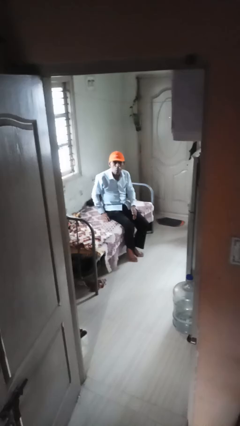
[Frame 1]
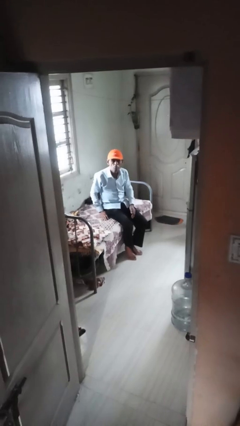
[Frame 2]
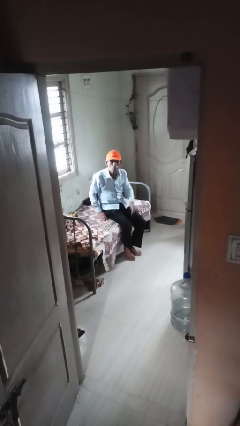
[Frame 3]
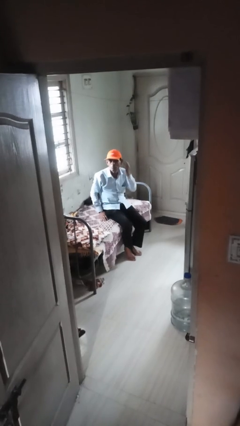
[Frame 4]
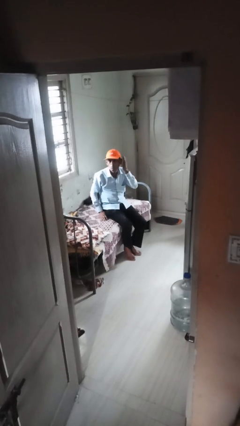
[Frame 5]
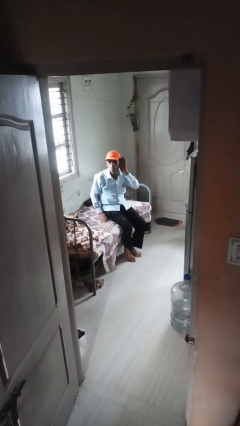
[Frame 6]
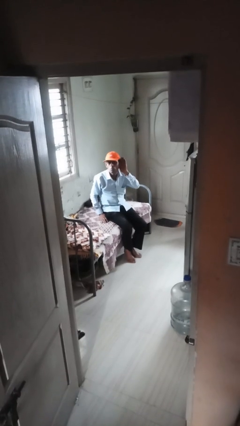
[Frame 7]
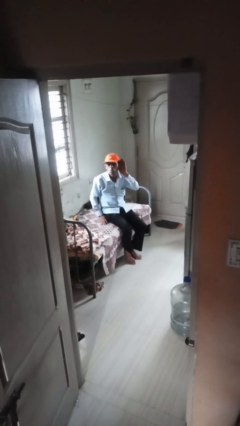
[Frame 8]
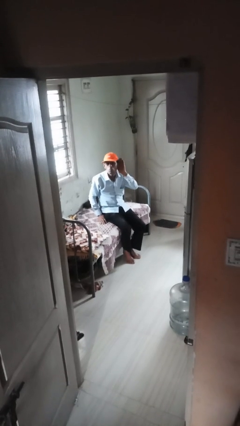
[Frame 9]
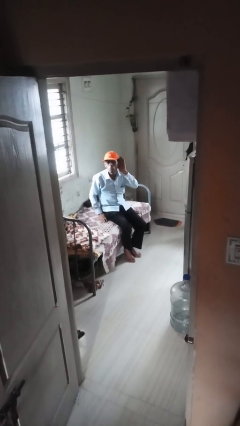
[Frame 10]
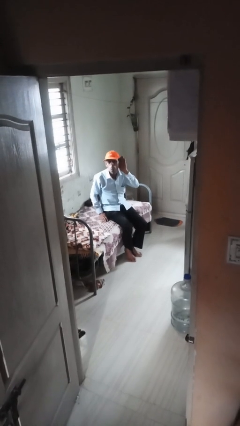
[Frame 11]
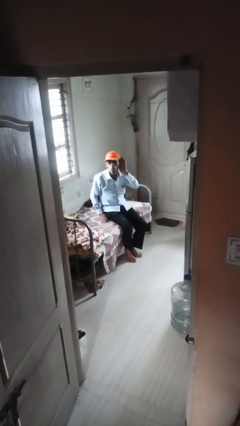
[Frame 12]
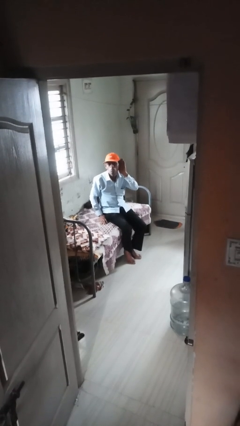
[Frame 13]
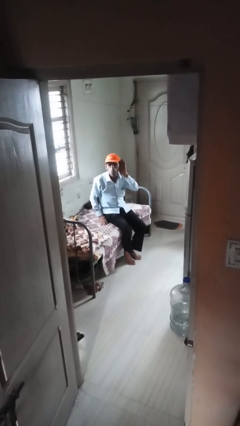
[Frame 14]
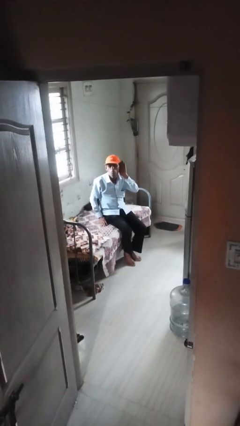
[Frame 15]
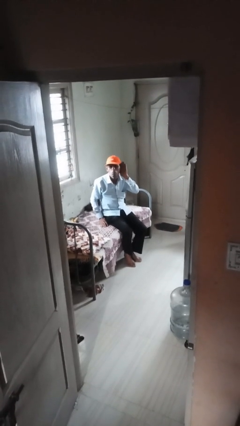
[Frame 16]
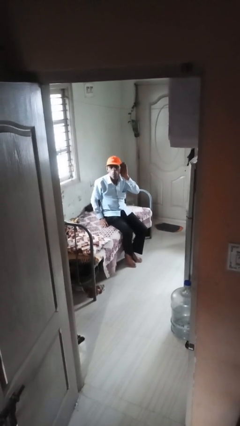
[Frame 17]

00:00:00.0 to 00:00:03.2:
person gestures listen closely

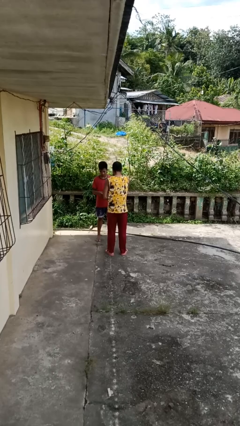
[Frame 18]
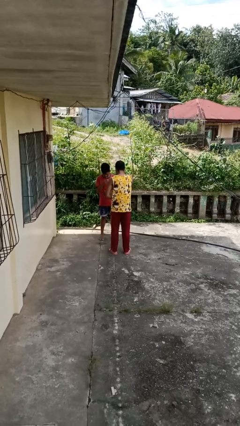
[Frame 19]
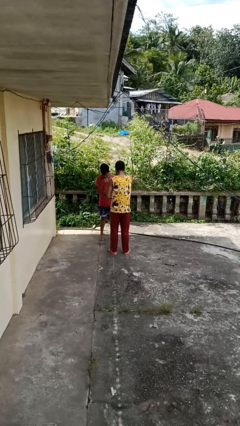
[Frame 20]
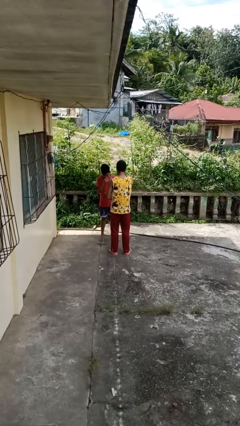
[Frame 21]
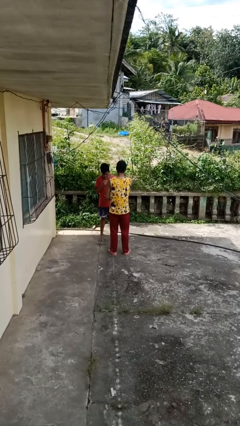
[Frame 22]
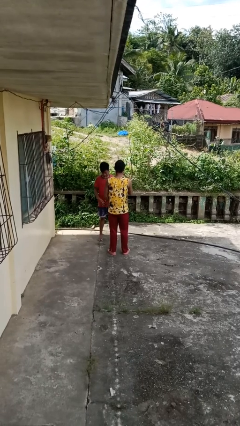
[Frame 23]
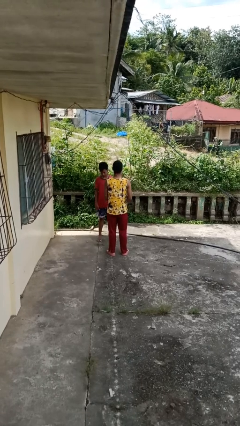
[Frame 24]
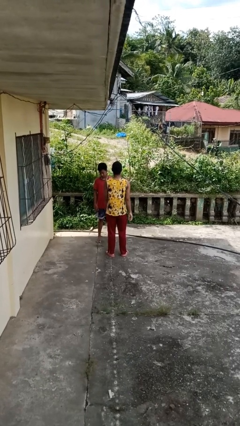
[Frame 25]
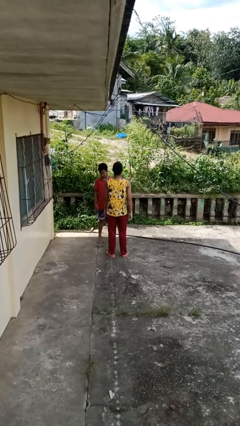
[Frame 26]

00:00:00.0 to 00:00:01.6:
person laughs with person

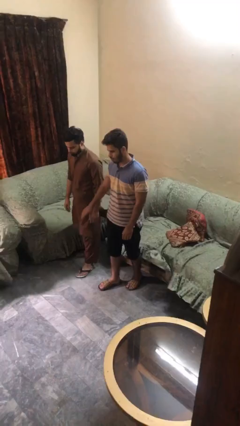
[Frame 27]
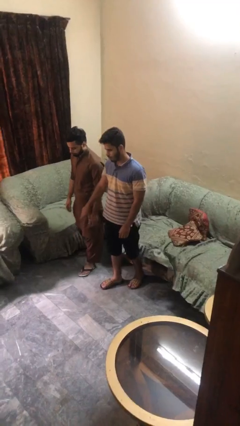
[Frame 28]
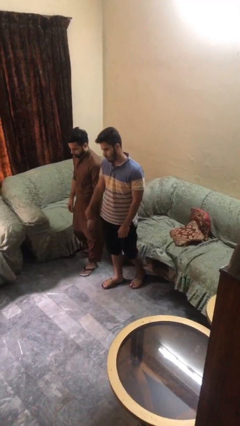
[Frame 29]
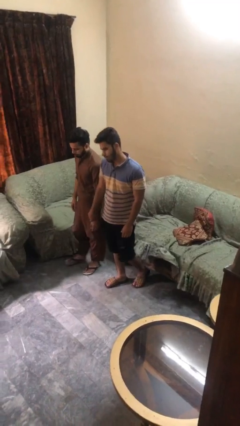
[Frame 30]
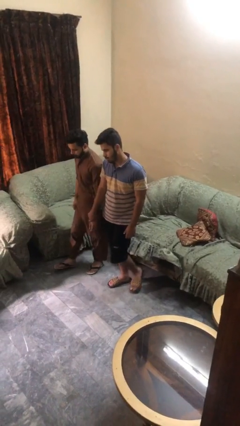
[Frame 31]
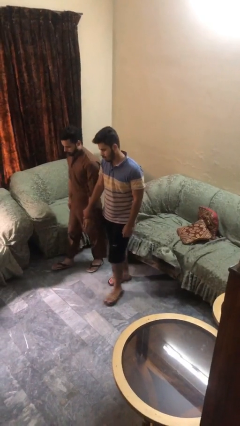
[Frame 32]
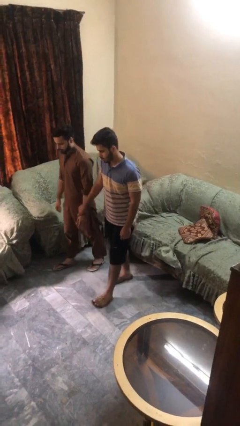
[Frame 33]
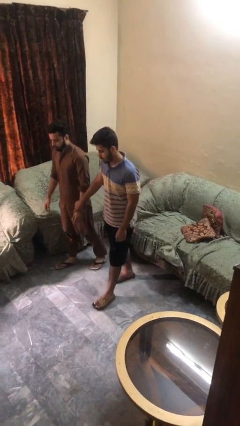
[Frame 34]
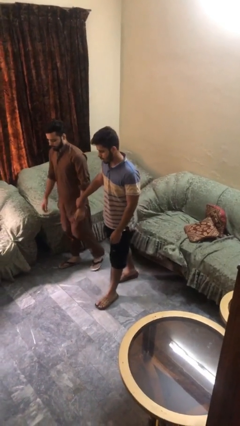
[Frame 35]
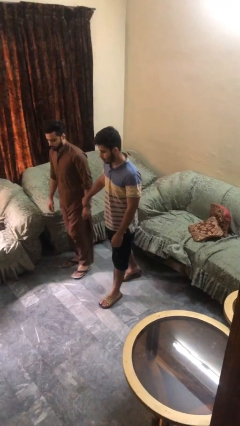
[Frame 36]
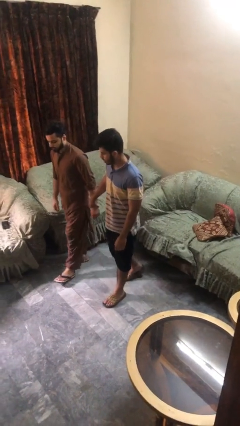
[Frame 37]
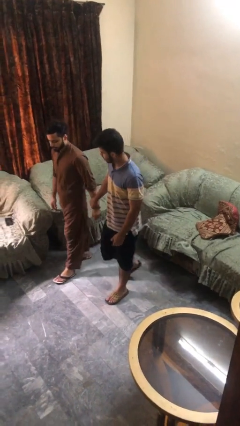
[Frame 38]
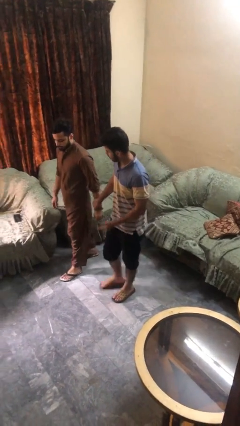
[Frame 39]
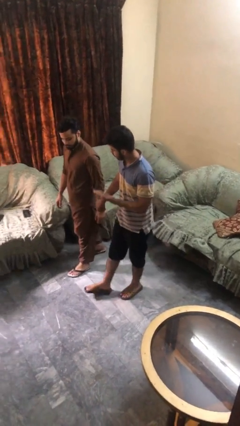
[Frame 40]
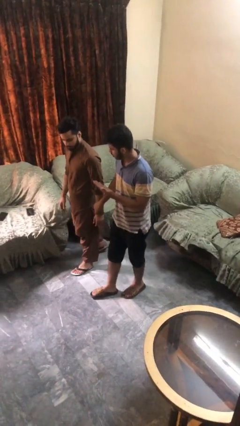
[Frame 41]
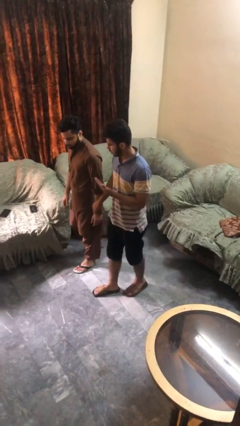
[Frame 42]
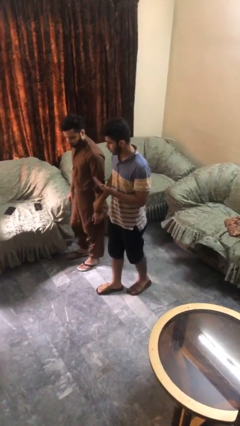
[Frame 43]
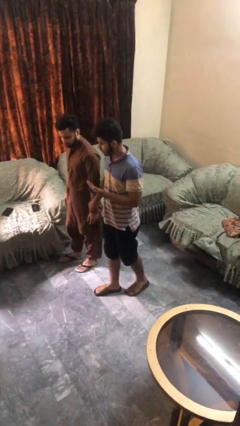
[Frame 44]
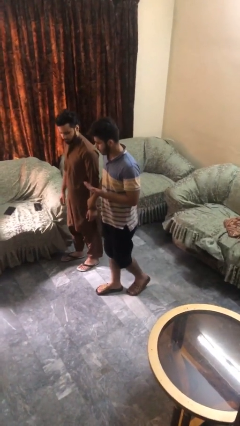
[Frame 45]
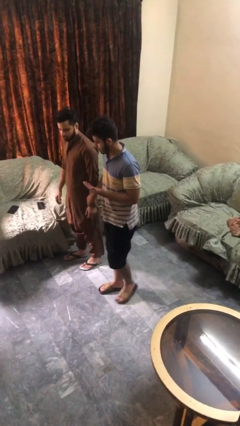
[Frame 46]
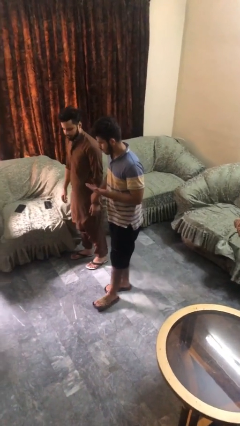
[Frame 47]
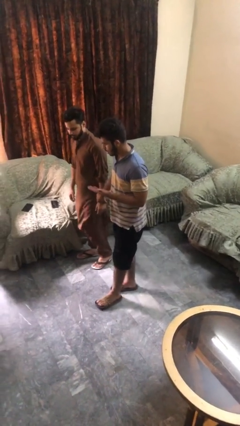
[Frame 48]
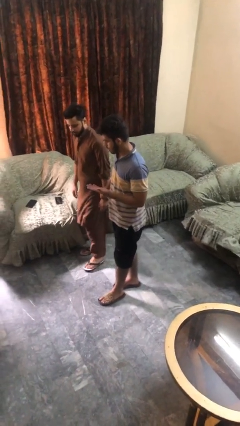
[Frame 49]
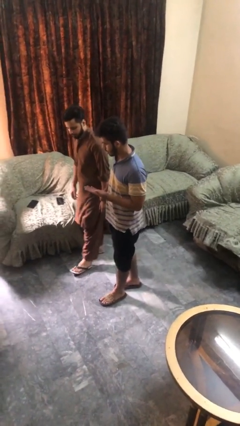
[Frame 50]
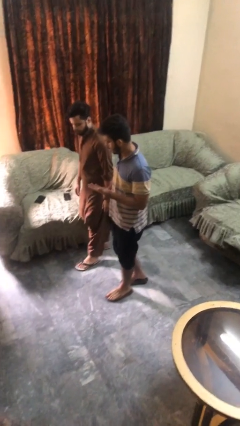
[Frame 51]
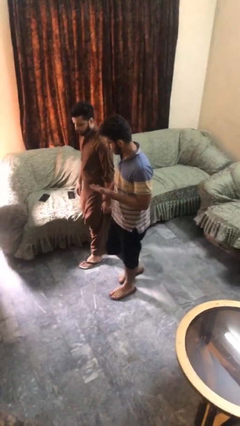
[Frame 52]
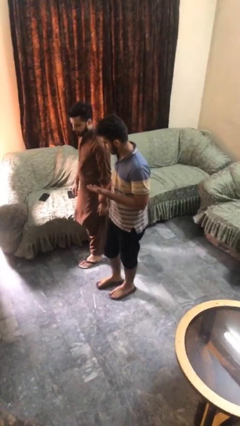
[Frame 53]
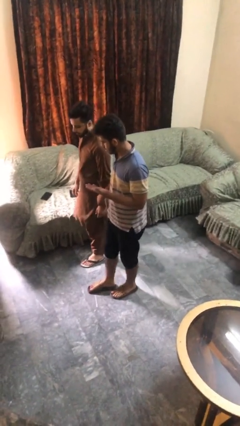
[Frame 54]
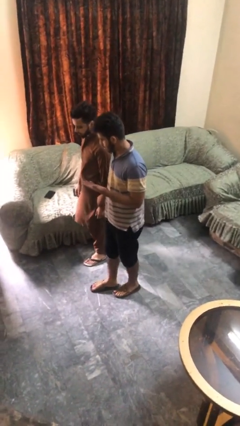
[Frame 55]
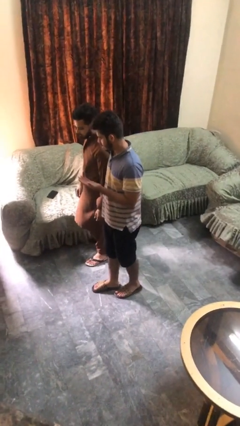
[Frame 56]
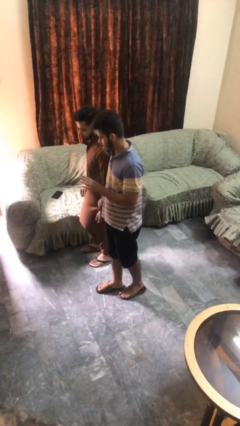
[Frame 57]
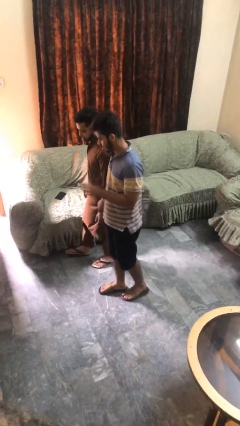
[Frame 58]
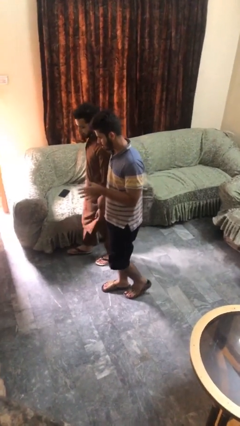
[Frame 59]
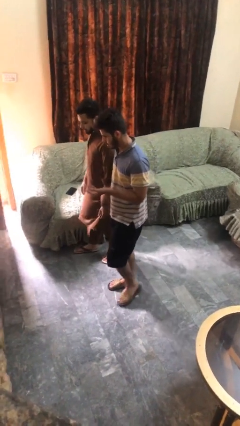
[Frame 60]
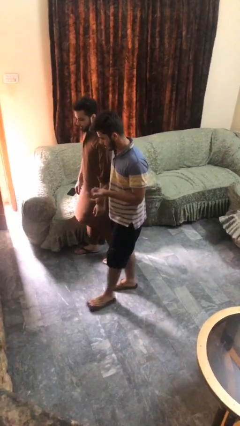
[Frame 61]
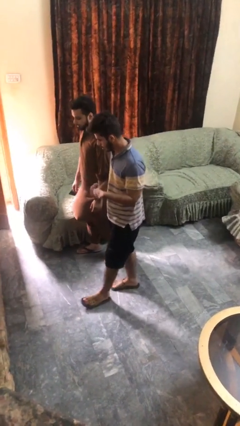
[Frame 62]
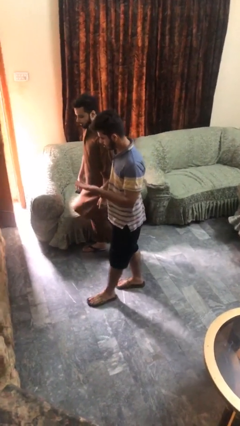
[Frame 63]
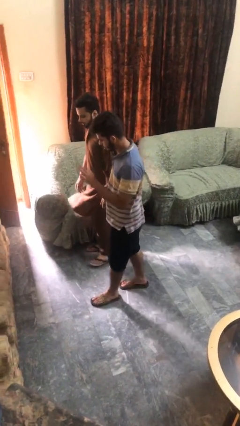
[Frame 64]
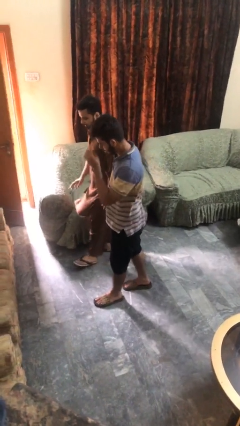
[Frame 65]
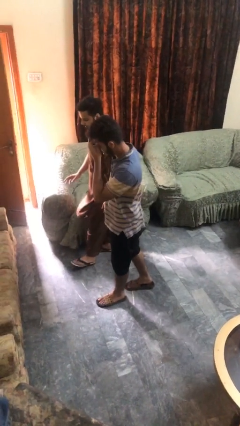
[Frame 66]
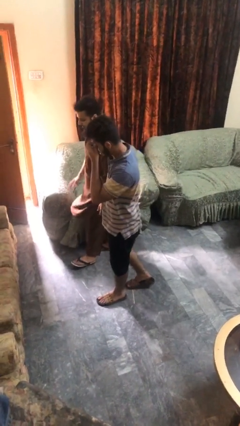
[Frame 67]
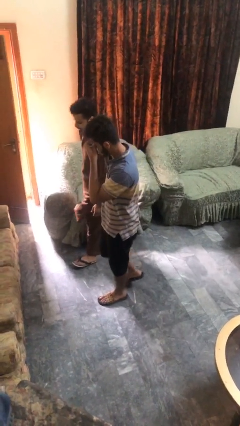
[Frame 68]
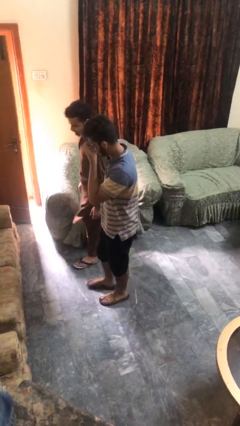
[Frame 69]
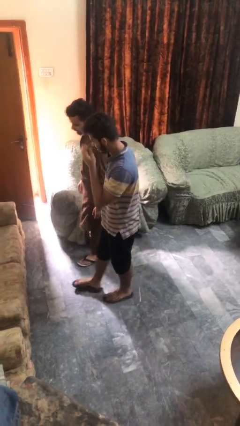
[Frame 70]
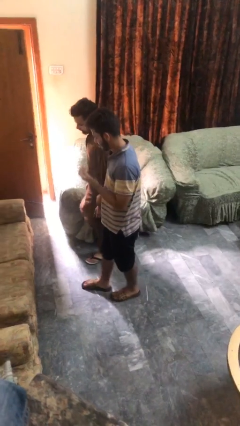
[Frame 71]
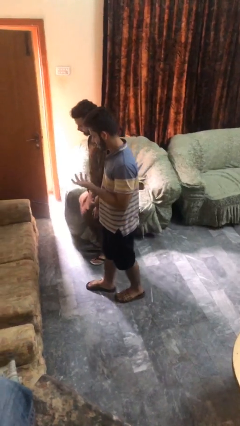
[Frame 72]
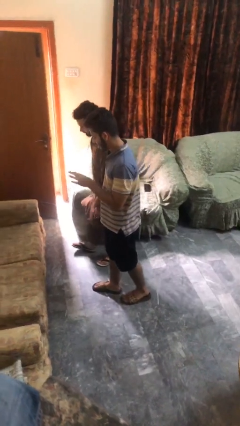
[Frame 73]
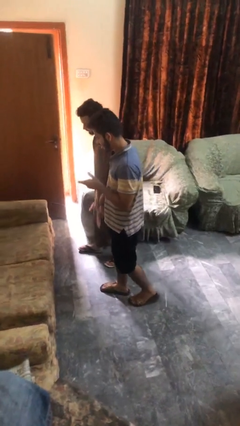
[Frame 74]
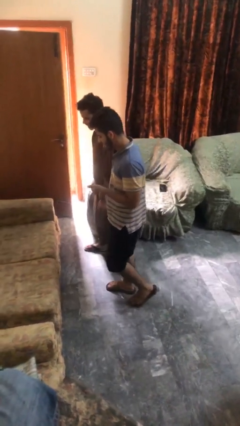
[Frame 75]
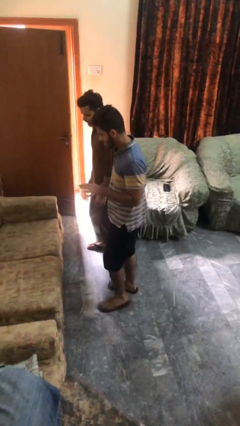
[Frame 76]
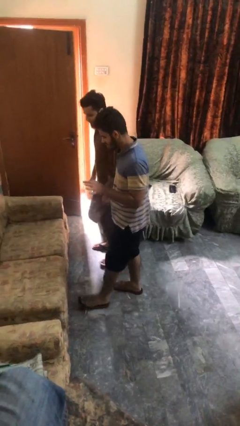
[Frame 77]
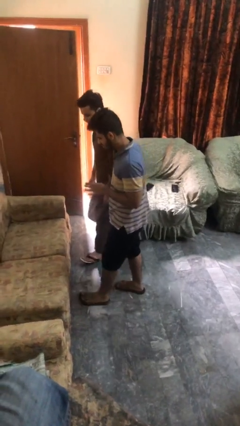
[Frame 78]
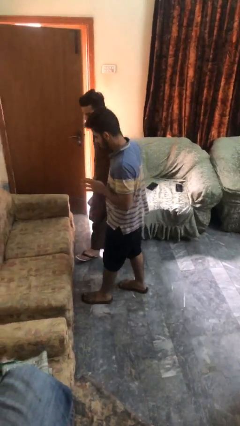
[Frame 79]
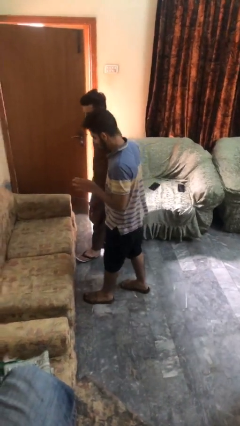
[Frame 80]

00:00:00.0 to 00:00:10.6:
person holds hand

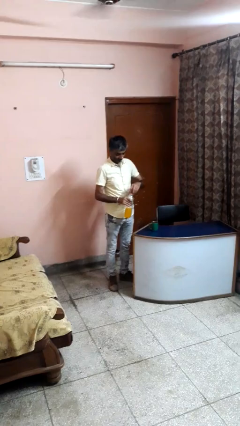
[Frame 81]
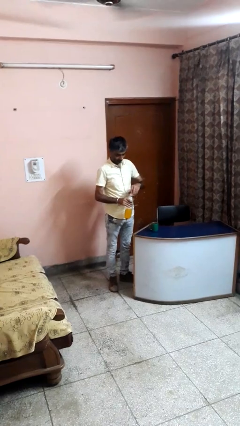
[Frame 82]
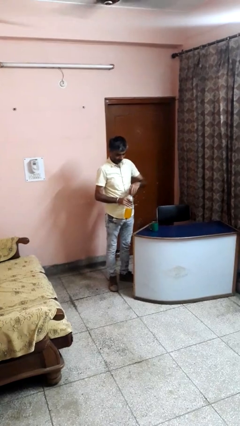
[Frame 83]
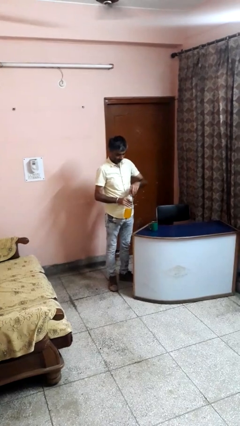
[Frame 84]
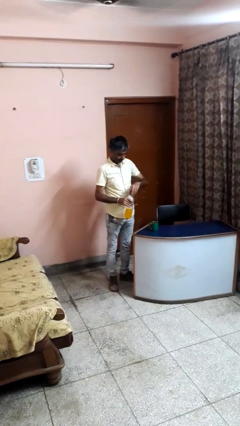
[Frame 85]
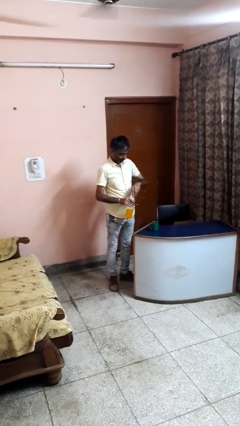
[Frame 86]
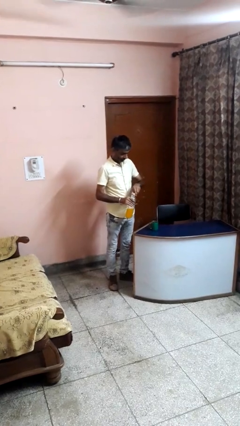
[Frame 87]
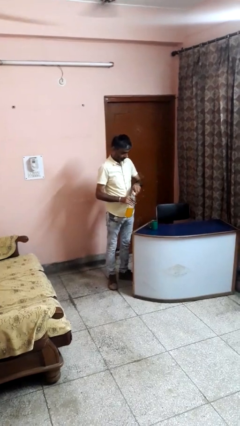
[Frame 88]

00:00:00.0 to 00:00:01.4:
person unscrews lid from bottle

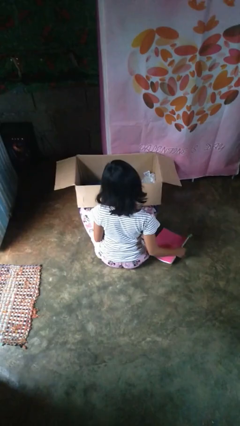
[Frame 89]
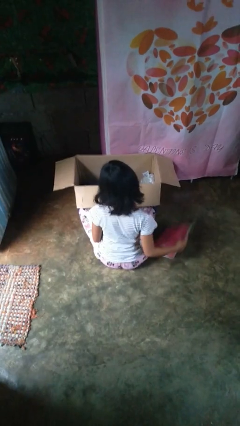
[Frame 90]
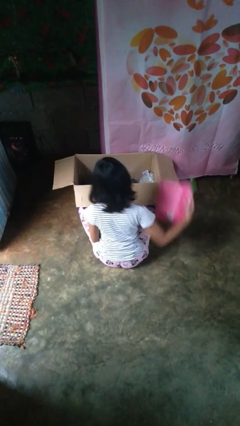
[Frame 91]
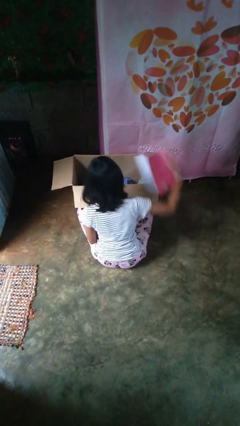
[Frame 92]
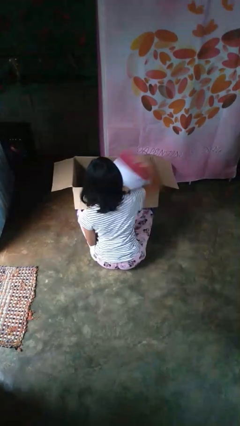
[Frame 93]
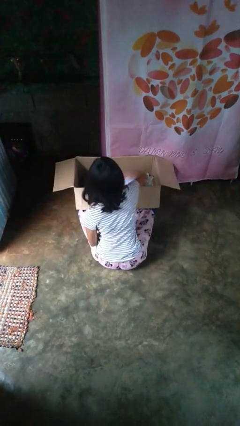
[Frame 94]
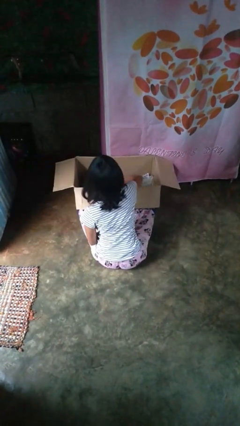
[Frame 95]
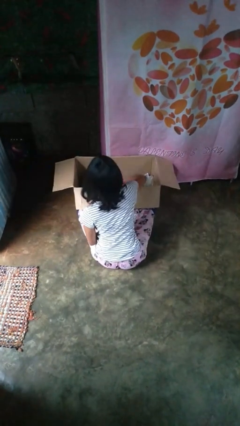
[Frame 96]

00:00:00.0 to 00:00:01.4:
person puts object into box
